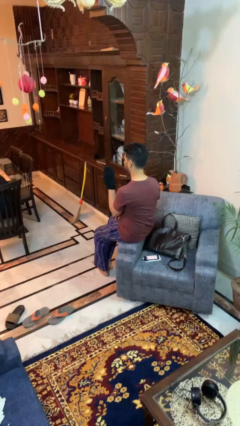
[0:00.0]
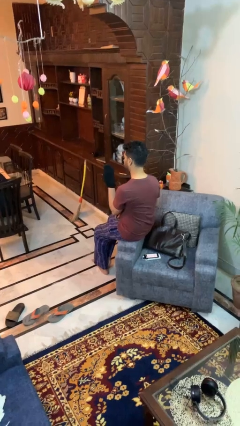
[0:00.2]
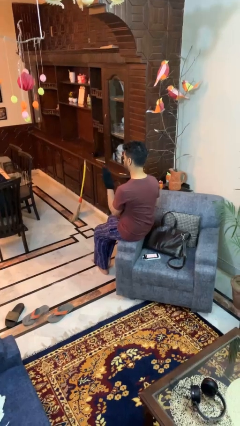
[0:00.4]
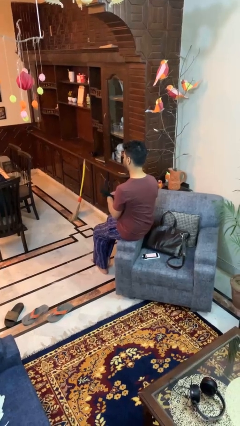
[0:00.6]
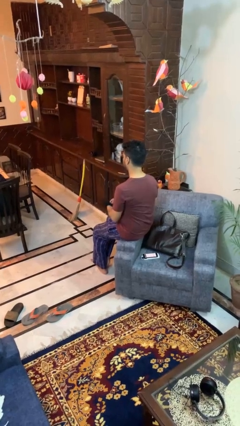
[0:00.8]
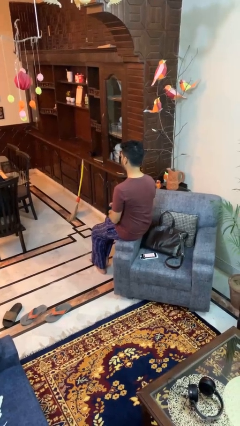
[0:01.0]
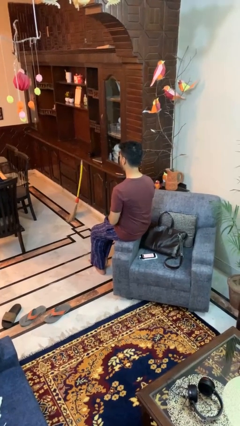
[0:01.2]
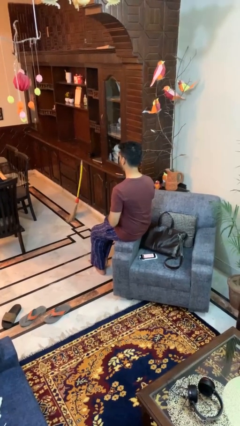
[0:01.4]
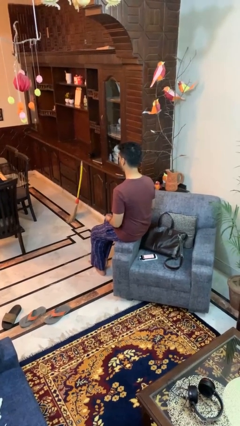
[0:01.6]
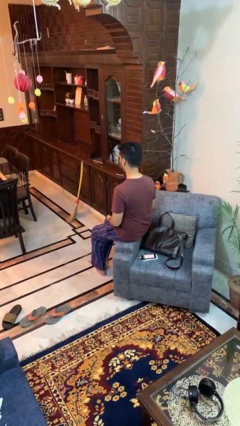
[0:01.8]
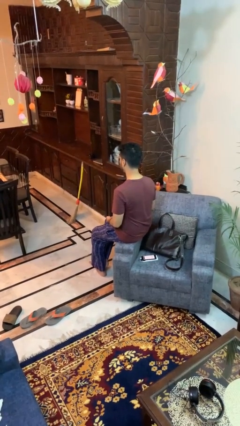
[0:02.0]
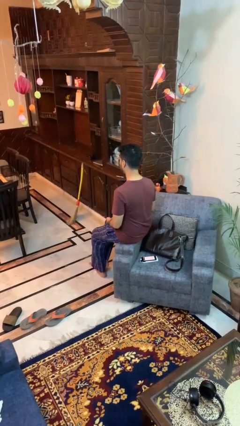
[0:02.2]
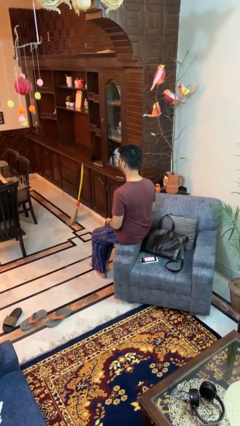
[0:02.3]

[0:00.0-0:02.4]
person takes off gloves

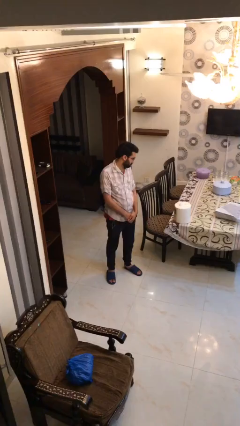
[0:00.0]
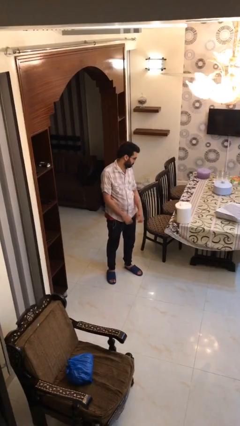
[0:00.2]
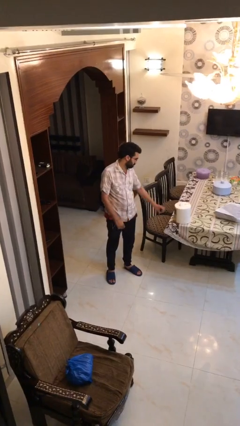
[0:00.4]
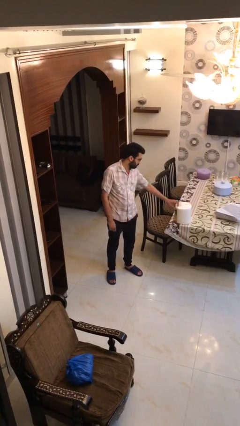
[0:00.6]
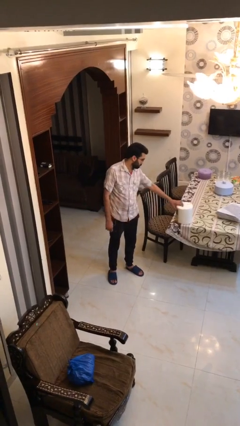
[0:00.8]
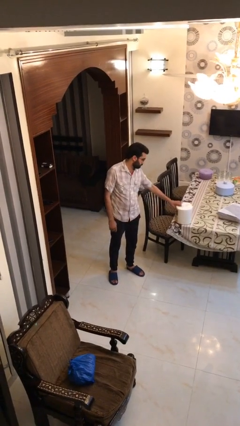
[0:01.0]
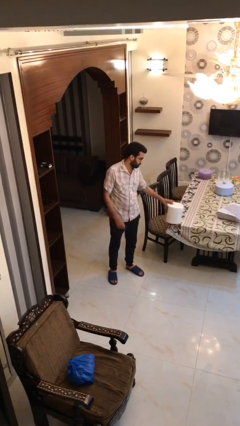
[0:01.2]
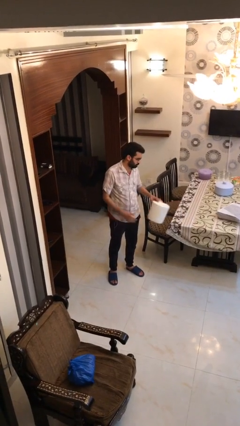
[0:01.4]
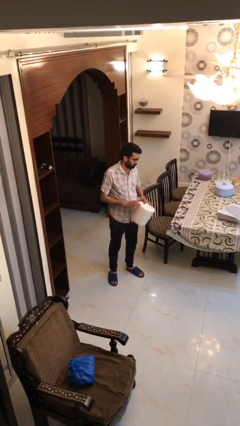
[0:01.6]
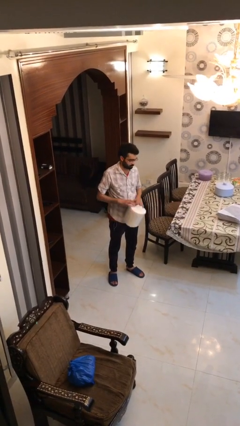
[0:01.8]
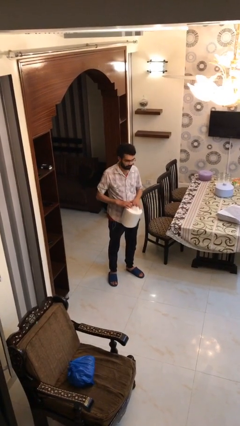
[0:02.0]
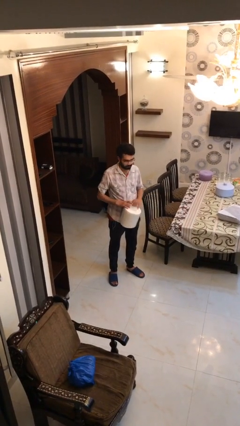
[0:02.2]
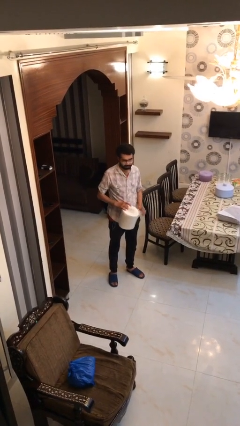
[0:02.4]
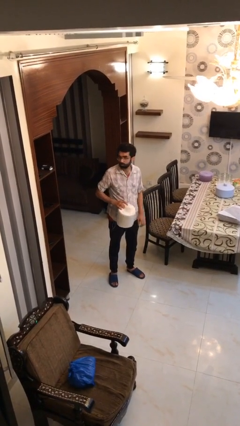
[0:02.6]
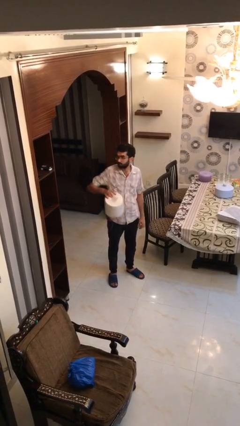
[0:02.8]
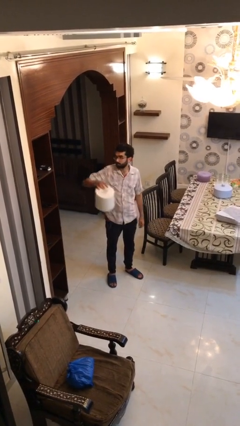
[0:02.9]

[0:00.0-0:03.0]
person picks up object from table

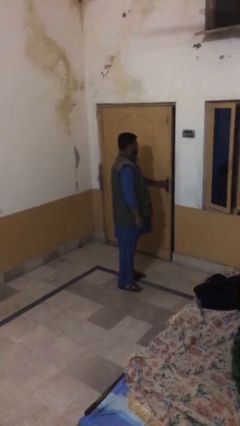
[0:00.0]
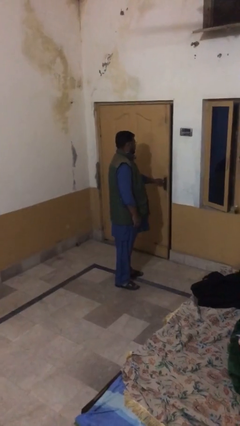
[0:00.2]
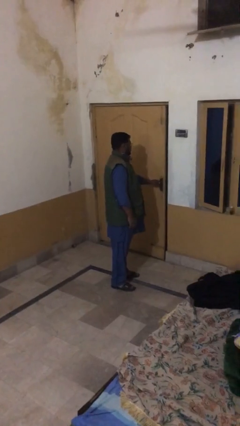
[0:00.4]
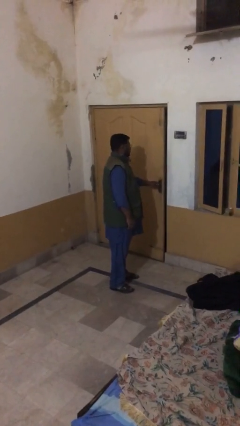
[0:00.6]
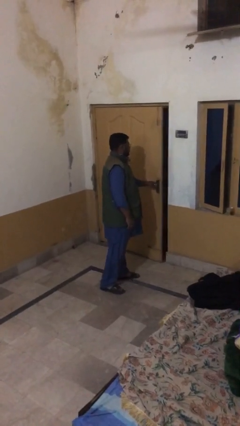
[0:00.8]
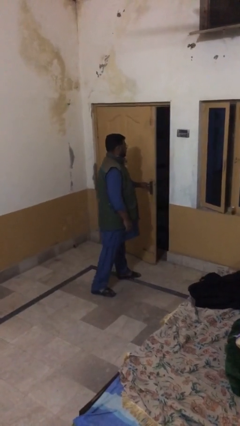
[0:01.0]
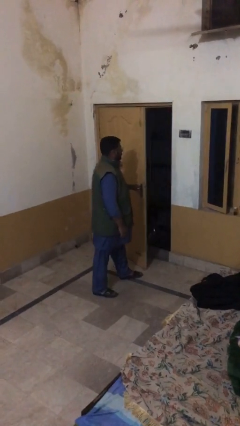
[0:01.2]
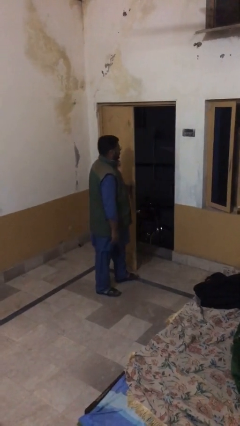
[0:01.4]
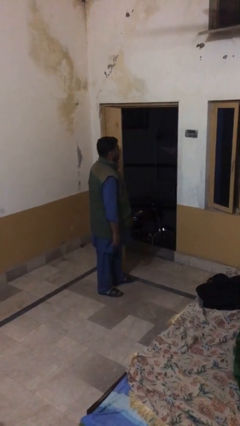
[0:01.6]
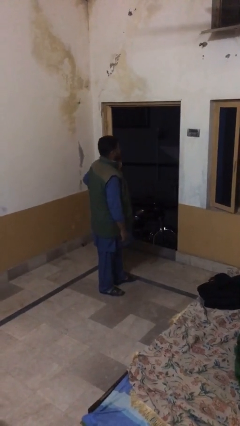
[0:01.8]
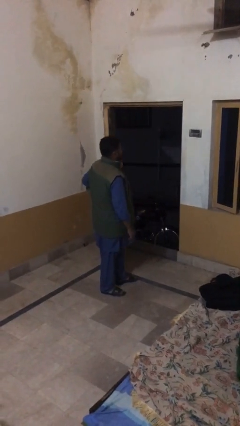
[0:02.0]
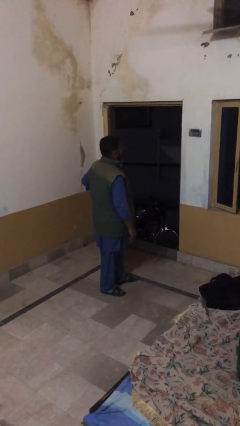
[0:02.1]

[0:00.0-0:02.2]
person opens facility door

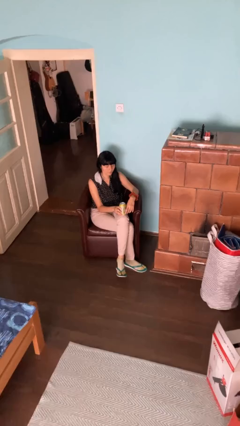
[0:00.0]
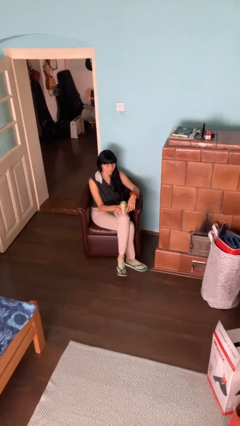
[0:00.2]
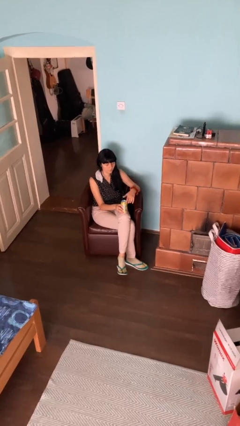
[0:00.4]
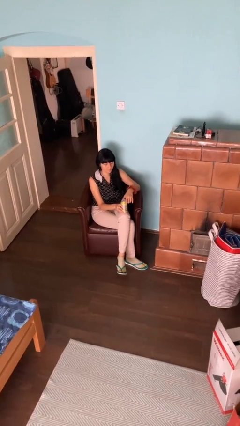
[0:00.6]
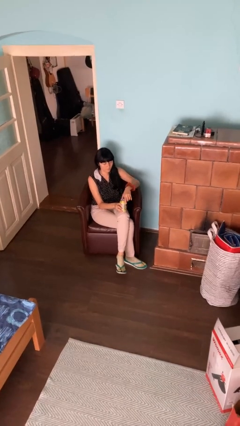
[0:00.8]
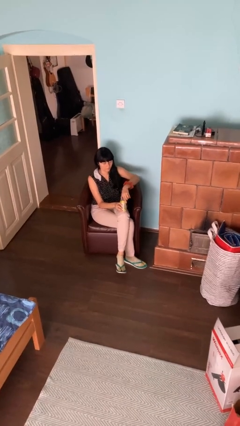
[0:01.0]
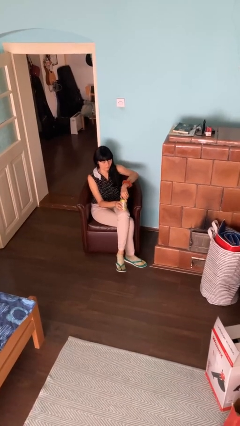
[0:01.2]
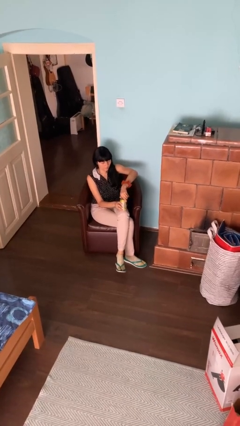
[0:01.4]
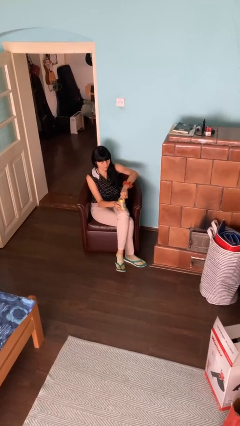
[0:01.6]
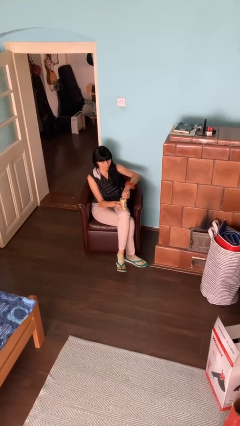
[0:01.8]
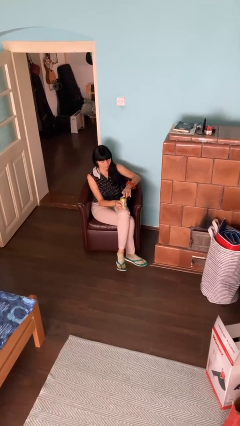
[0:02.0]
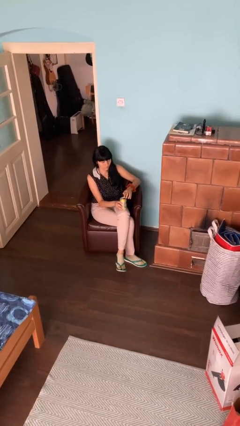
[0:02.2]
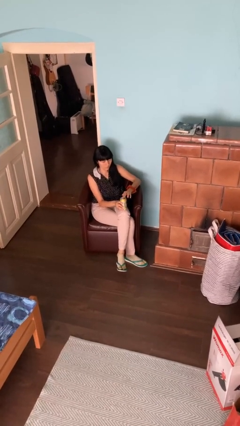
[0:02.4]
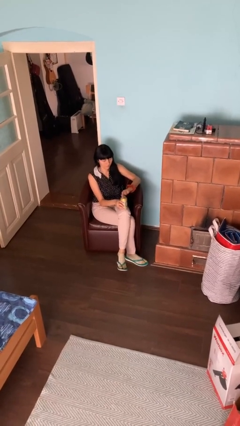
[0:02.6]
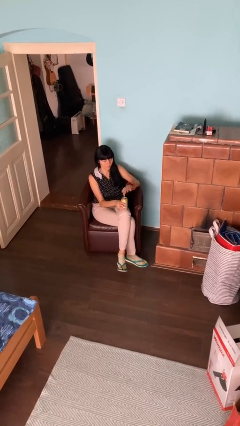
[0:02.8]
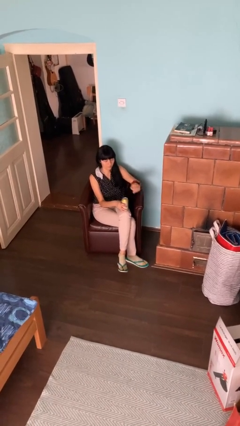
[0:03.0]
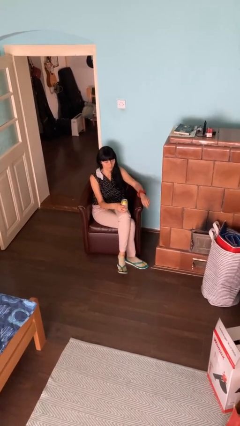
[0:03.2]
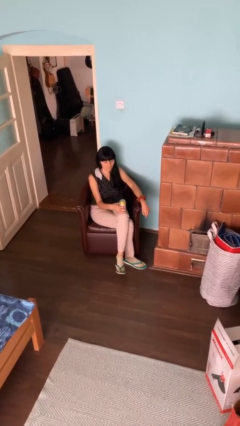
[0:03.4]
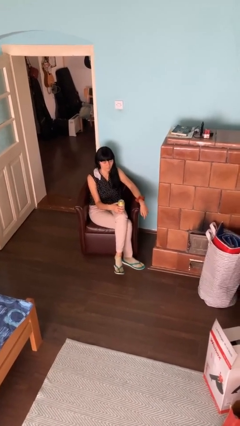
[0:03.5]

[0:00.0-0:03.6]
person opens beverage can

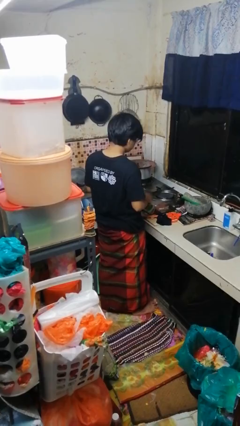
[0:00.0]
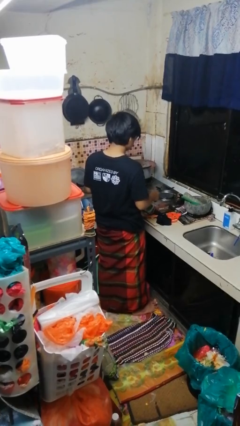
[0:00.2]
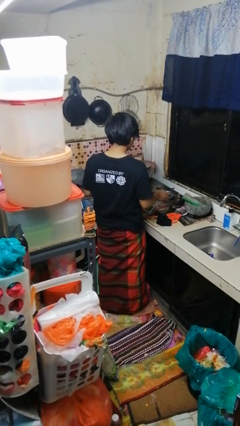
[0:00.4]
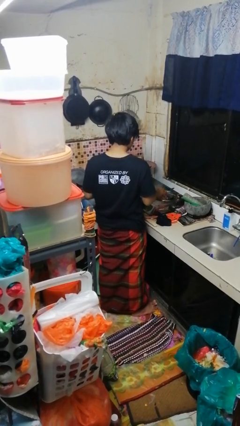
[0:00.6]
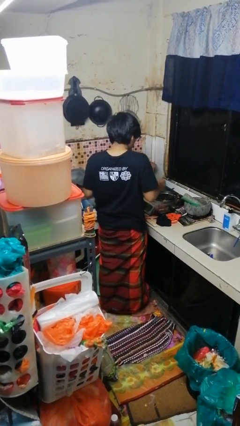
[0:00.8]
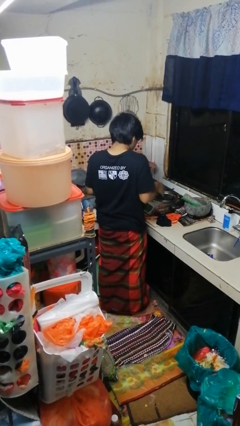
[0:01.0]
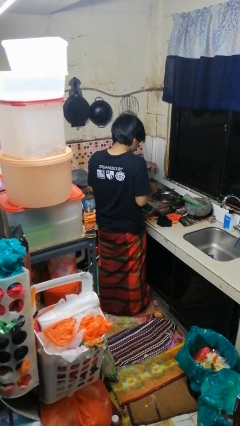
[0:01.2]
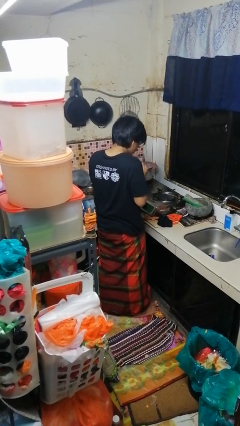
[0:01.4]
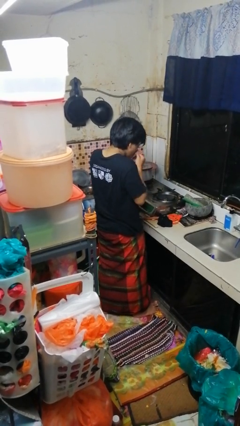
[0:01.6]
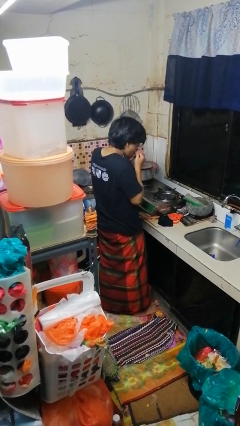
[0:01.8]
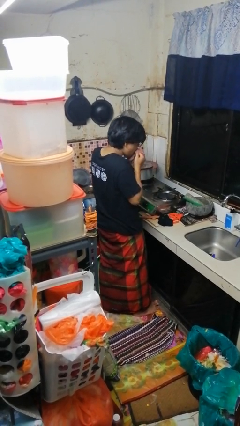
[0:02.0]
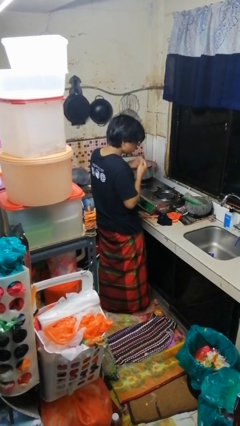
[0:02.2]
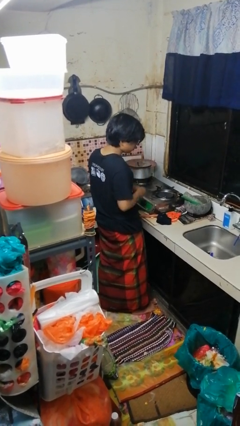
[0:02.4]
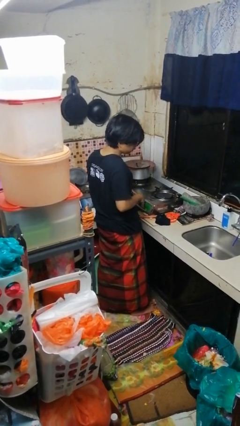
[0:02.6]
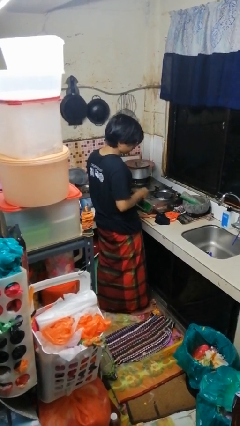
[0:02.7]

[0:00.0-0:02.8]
person burns hand

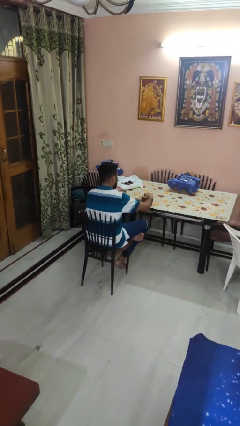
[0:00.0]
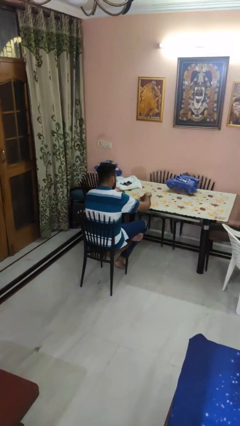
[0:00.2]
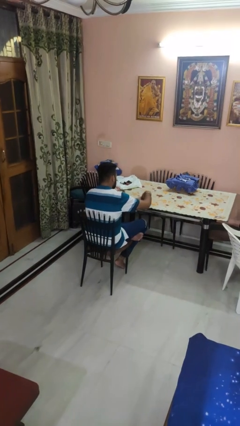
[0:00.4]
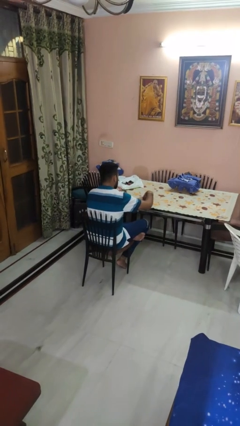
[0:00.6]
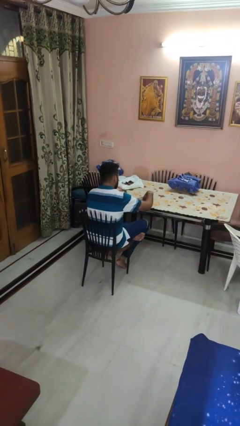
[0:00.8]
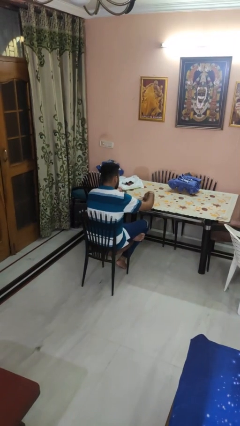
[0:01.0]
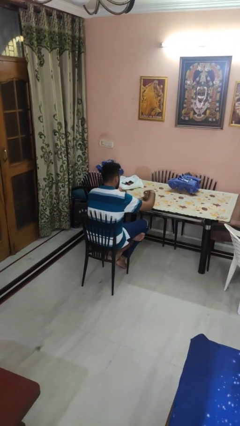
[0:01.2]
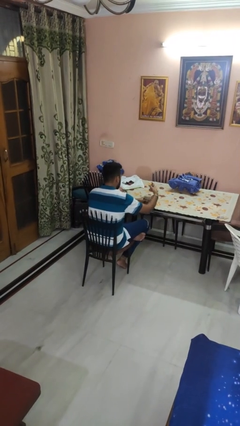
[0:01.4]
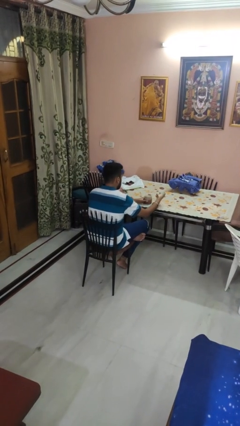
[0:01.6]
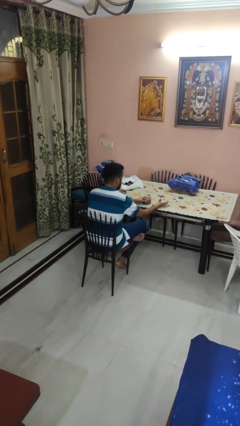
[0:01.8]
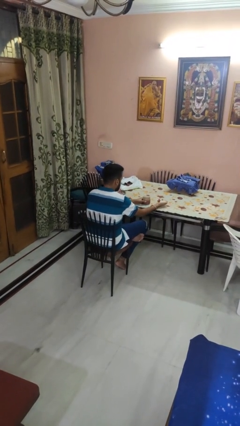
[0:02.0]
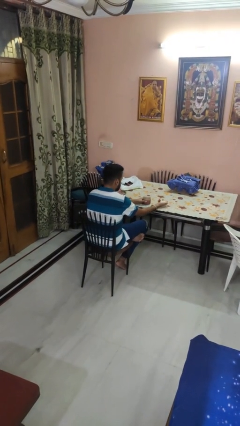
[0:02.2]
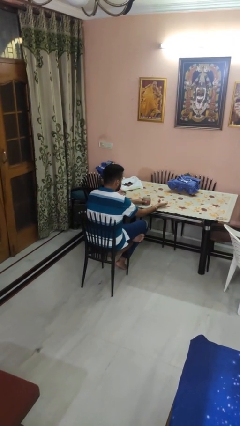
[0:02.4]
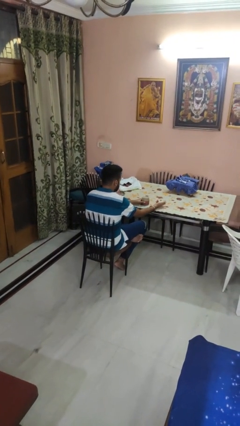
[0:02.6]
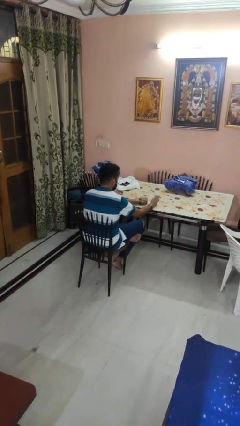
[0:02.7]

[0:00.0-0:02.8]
person opens jar

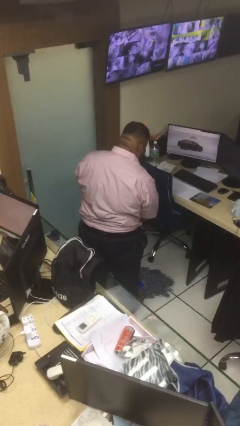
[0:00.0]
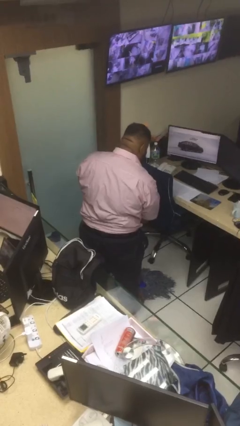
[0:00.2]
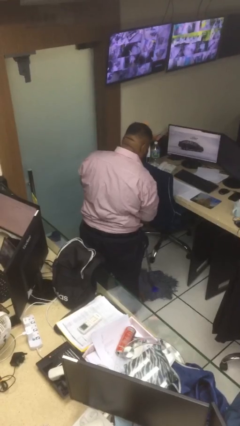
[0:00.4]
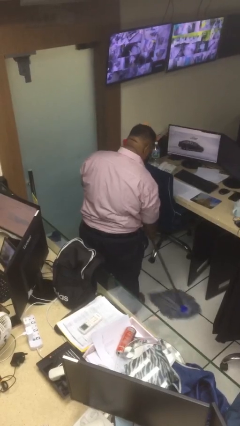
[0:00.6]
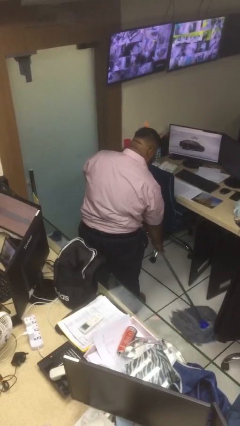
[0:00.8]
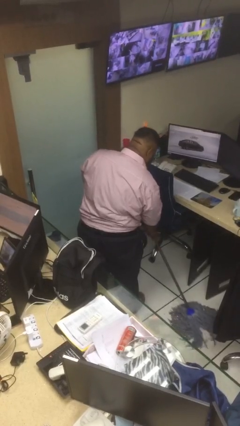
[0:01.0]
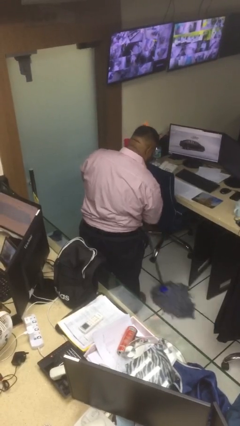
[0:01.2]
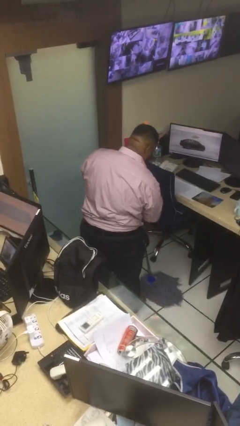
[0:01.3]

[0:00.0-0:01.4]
person mops
